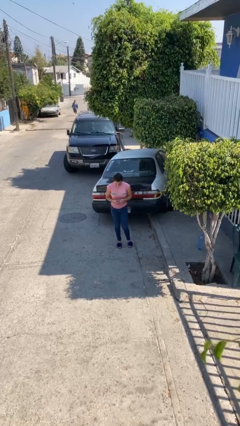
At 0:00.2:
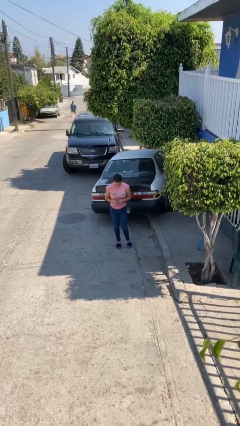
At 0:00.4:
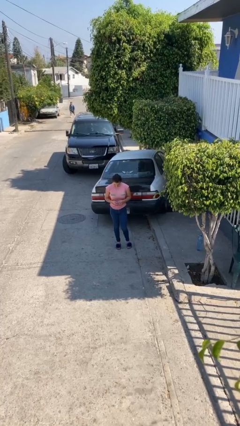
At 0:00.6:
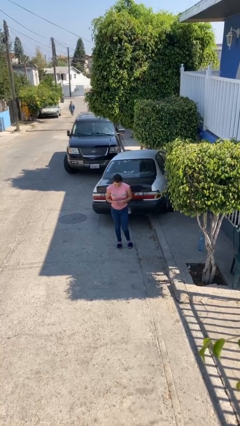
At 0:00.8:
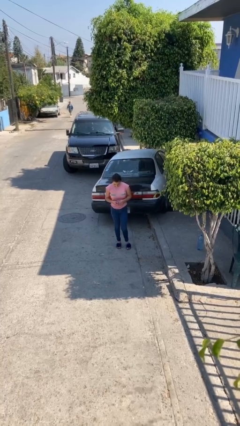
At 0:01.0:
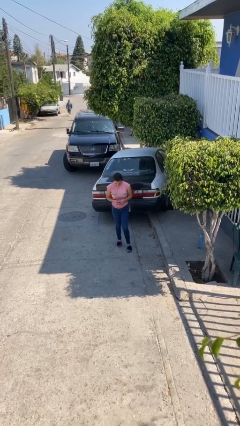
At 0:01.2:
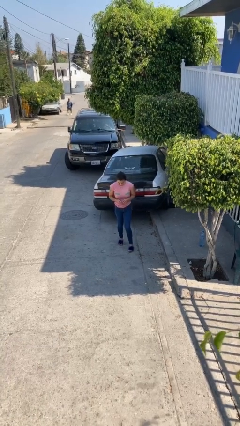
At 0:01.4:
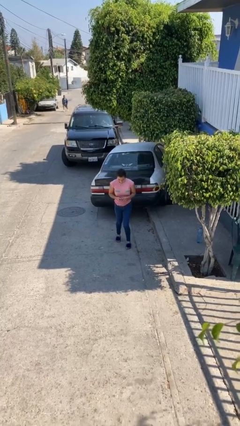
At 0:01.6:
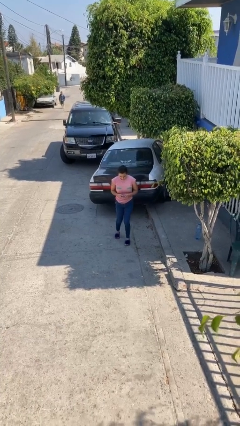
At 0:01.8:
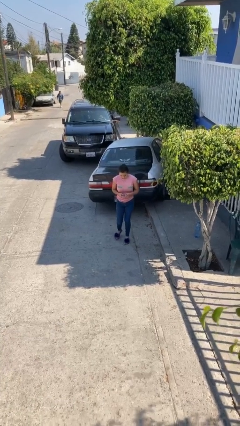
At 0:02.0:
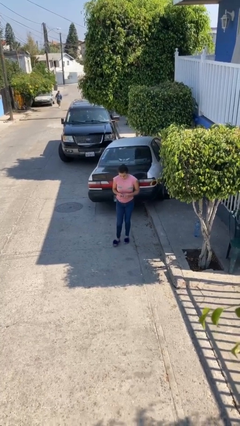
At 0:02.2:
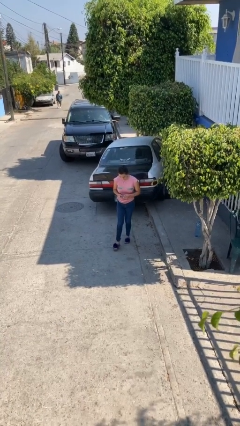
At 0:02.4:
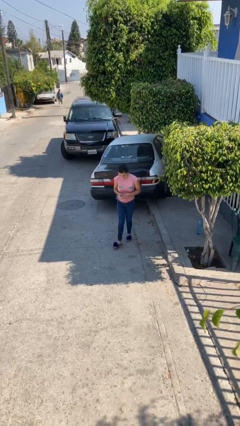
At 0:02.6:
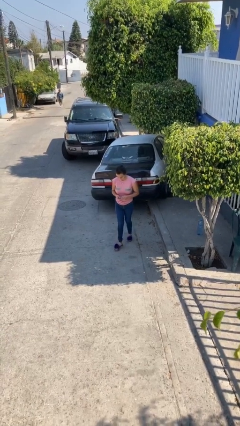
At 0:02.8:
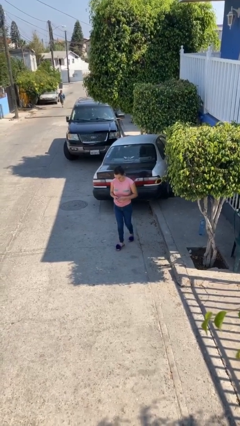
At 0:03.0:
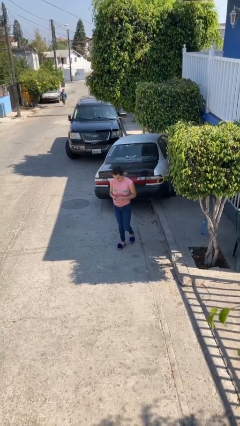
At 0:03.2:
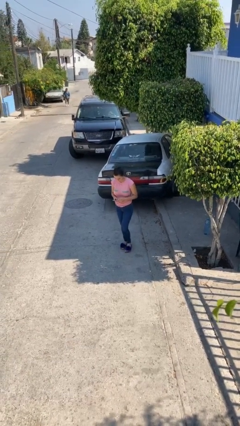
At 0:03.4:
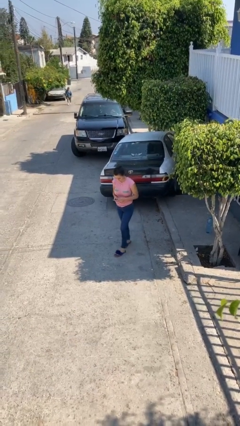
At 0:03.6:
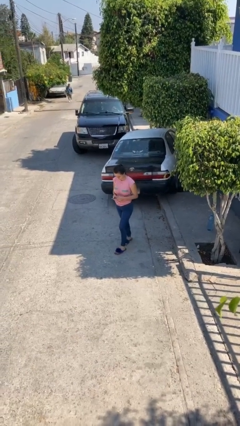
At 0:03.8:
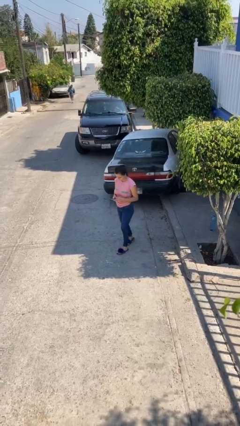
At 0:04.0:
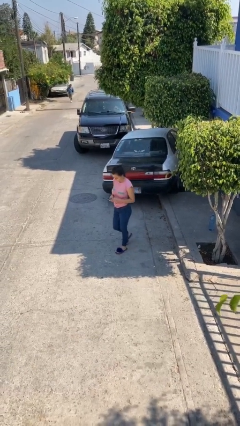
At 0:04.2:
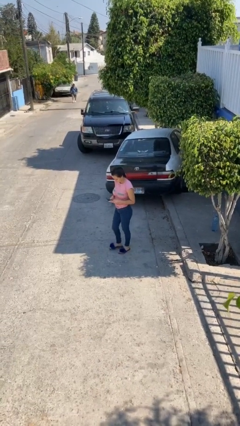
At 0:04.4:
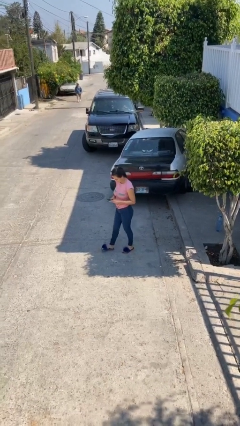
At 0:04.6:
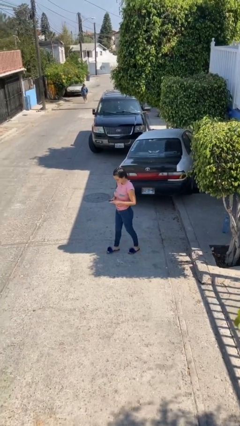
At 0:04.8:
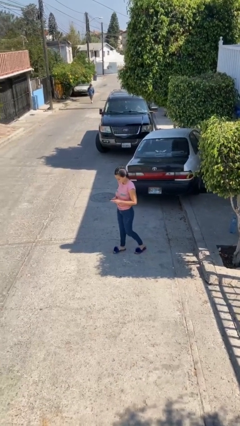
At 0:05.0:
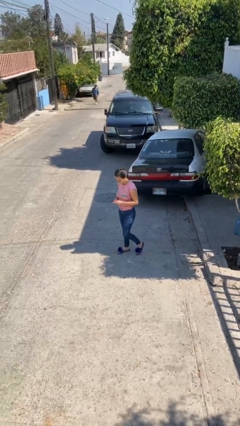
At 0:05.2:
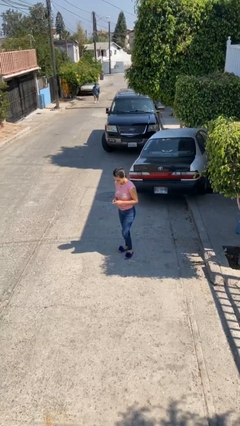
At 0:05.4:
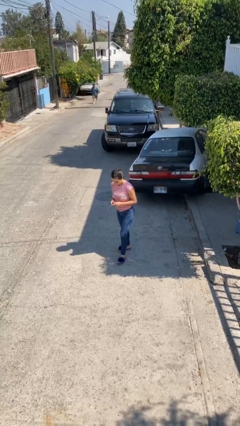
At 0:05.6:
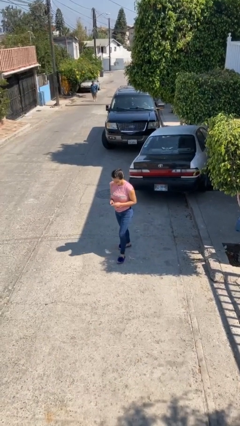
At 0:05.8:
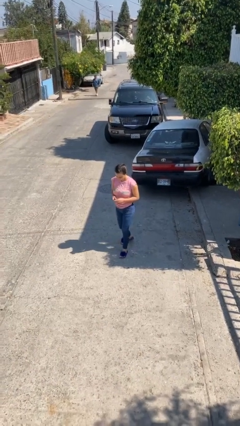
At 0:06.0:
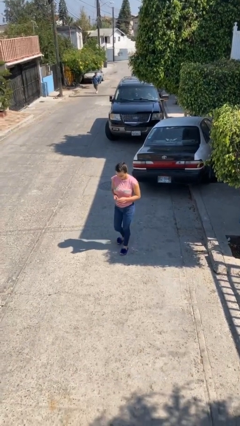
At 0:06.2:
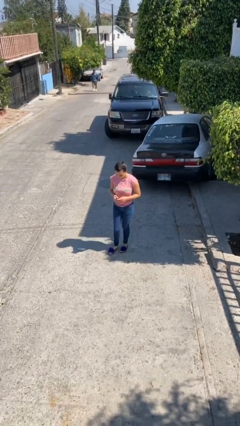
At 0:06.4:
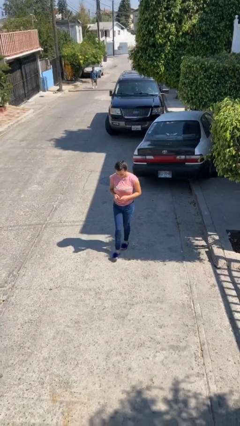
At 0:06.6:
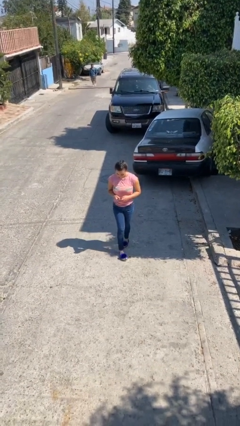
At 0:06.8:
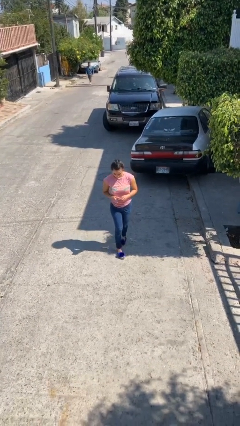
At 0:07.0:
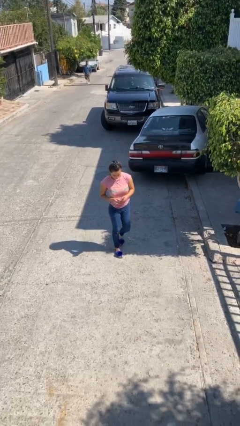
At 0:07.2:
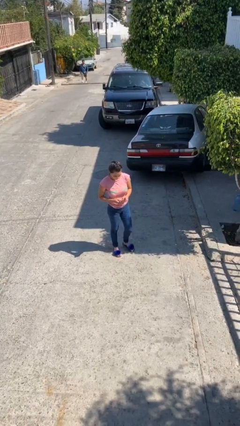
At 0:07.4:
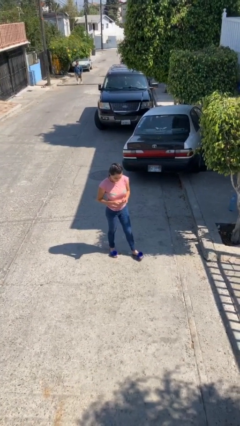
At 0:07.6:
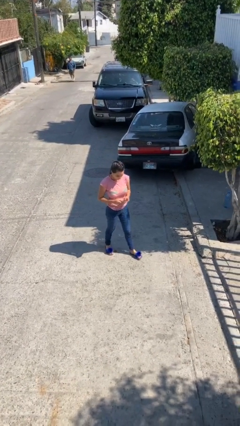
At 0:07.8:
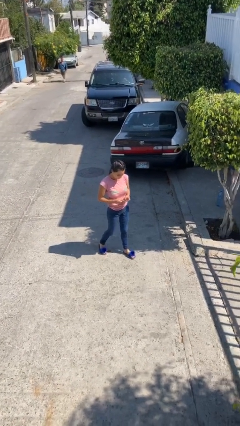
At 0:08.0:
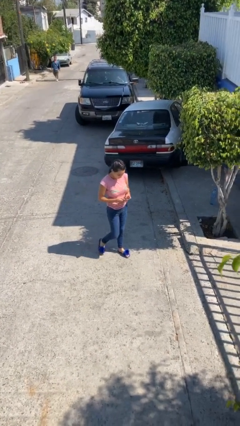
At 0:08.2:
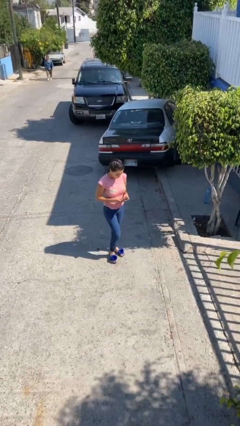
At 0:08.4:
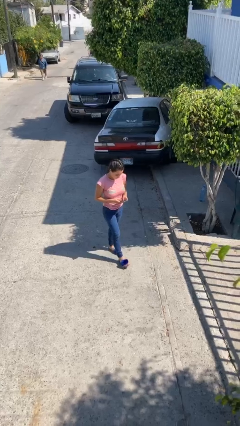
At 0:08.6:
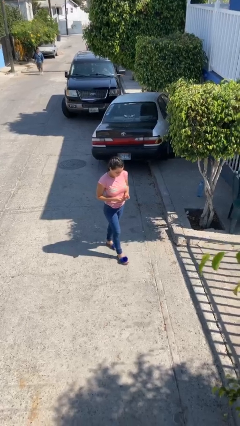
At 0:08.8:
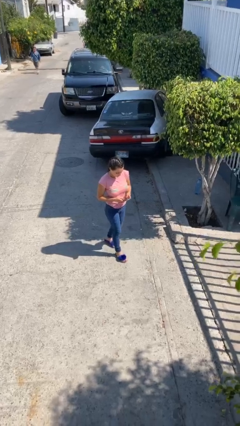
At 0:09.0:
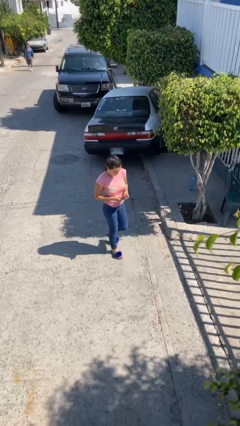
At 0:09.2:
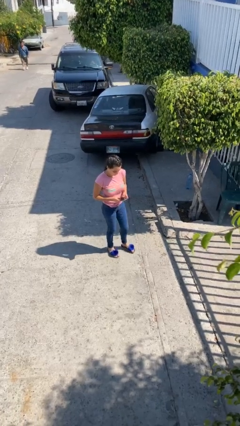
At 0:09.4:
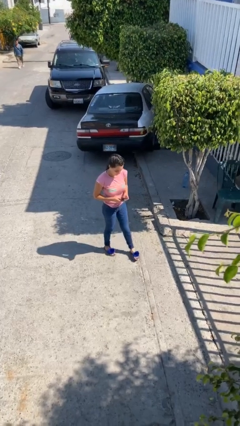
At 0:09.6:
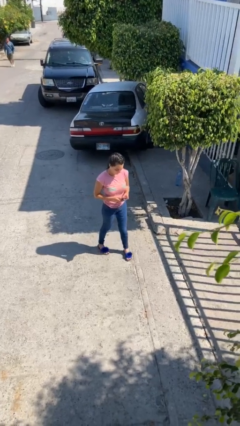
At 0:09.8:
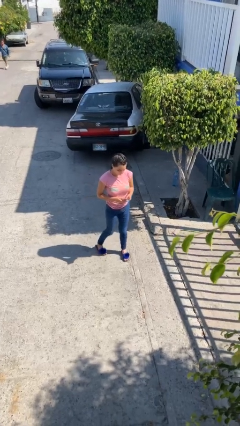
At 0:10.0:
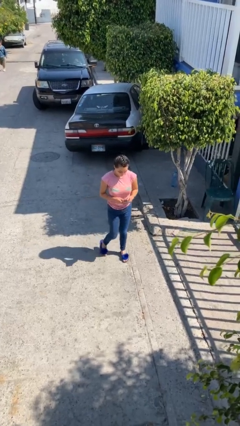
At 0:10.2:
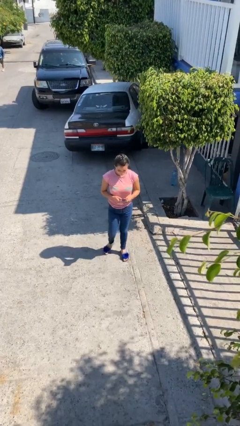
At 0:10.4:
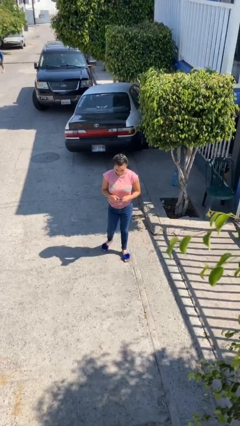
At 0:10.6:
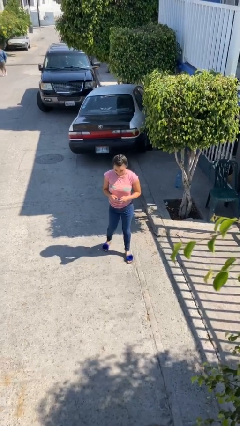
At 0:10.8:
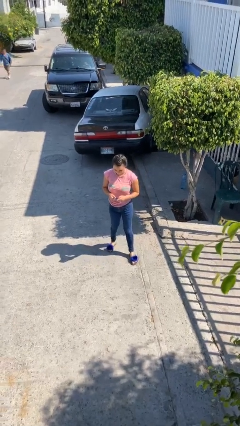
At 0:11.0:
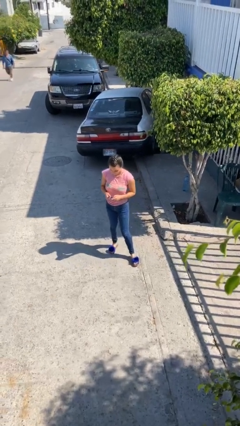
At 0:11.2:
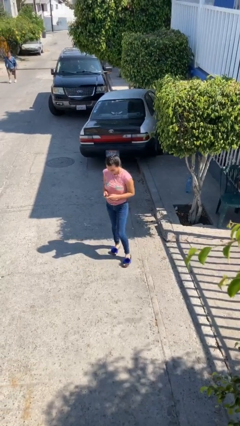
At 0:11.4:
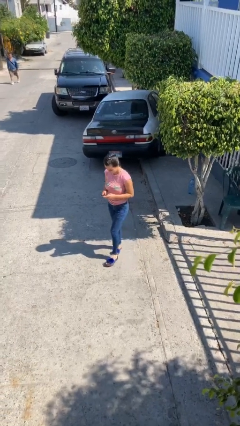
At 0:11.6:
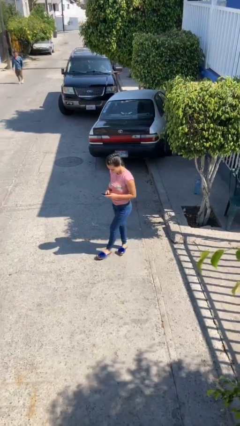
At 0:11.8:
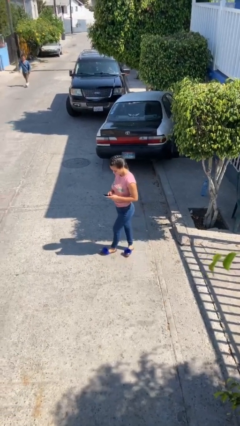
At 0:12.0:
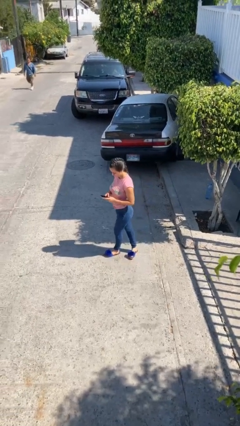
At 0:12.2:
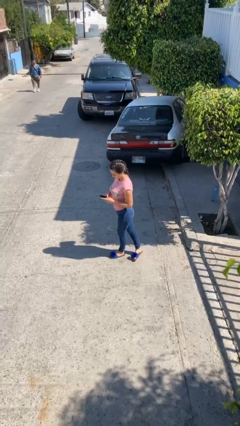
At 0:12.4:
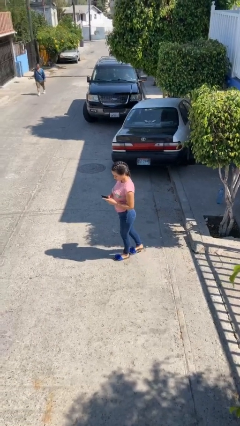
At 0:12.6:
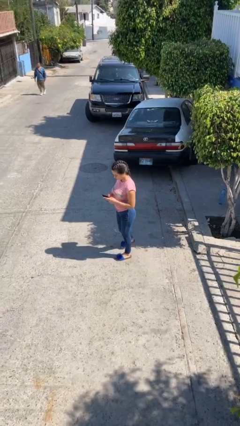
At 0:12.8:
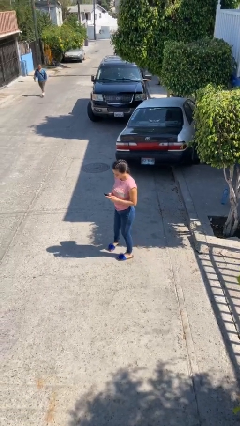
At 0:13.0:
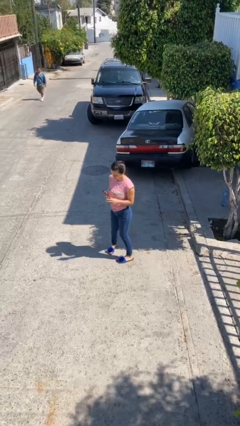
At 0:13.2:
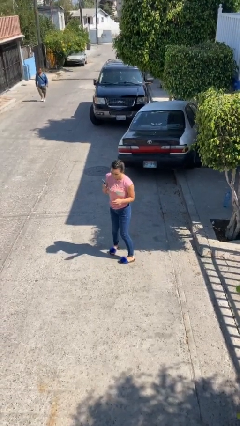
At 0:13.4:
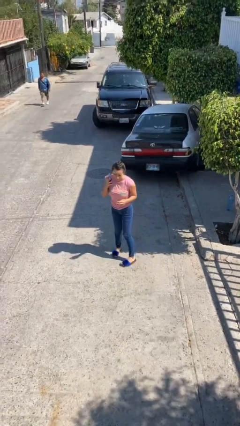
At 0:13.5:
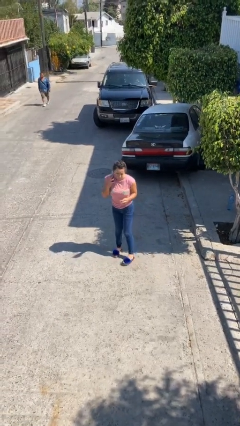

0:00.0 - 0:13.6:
person texts on phone

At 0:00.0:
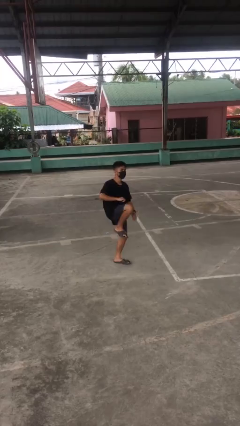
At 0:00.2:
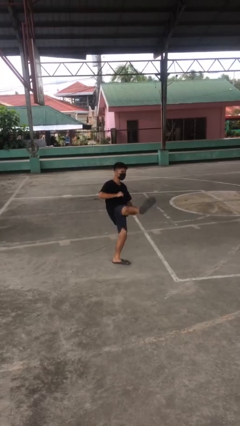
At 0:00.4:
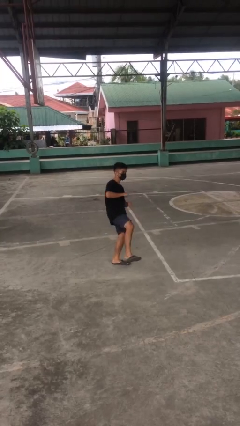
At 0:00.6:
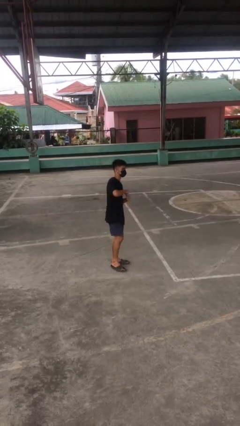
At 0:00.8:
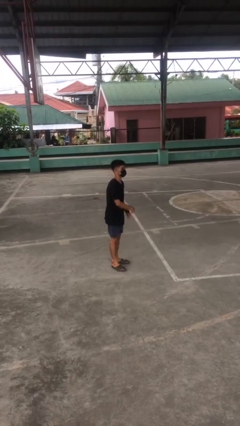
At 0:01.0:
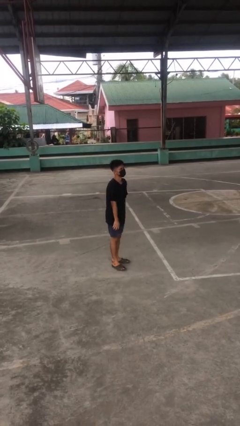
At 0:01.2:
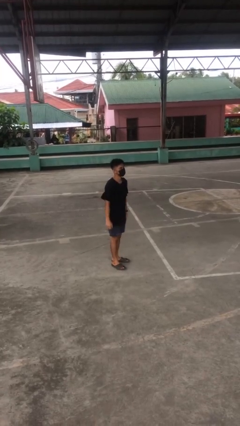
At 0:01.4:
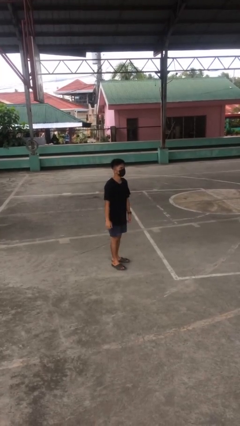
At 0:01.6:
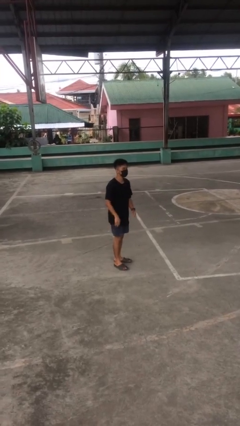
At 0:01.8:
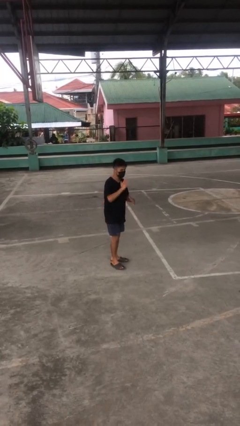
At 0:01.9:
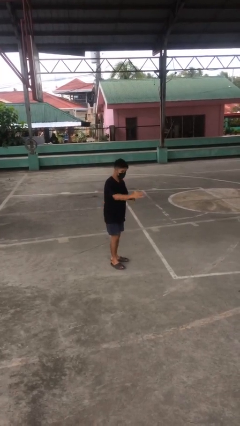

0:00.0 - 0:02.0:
person karate kicks

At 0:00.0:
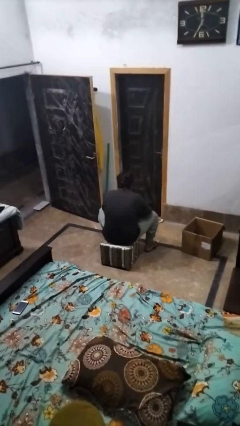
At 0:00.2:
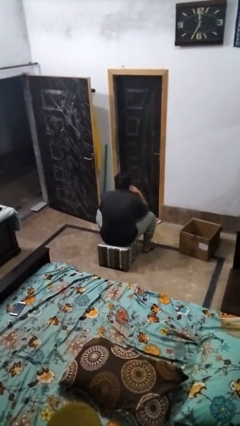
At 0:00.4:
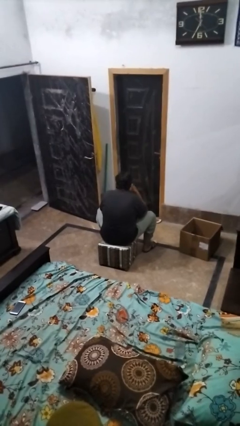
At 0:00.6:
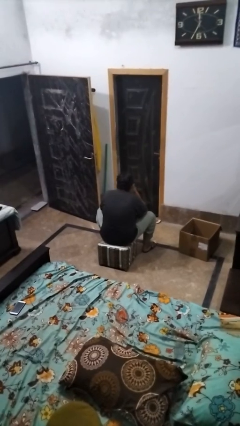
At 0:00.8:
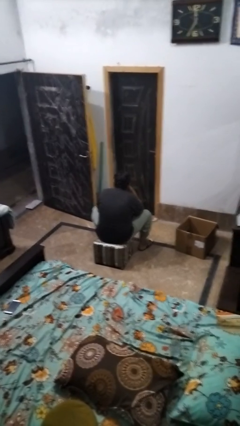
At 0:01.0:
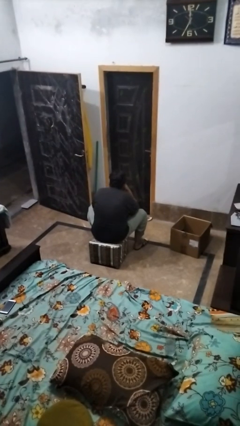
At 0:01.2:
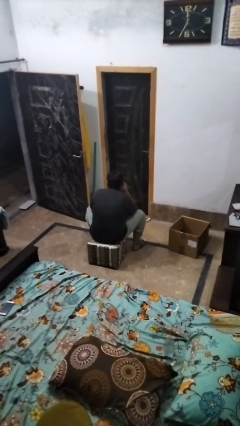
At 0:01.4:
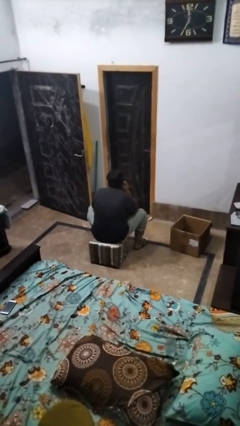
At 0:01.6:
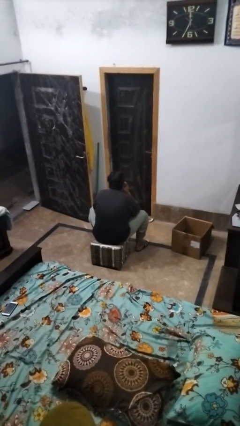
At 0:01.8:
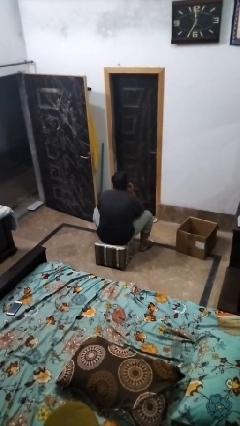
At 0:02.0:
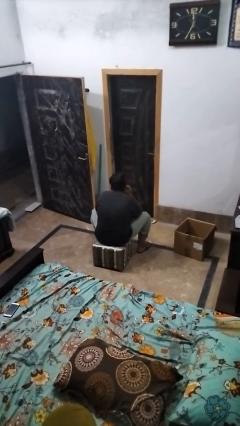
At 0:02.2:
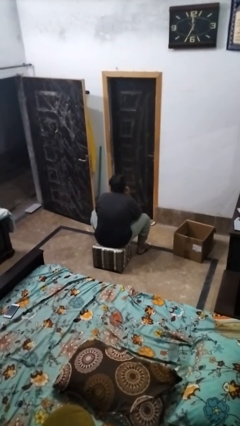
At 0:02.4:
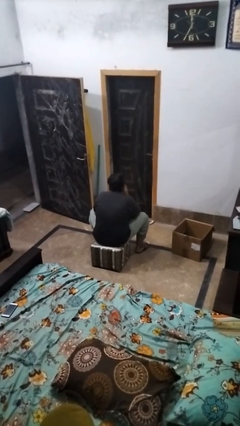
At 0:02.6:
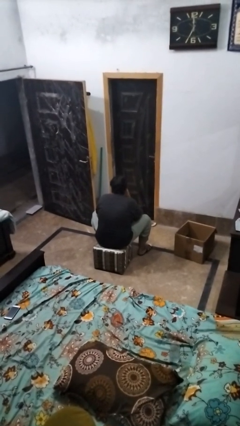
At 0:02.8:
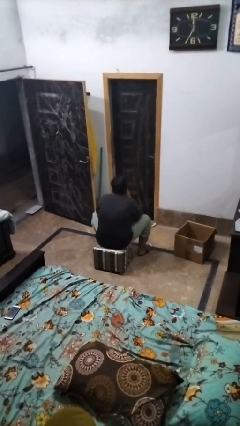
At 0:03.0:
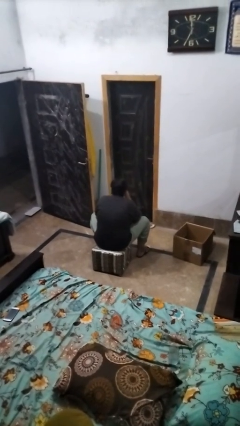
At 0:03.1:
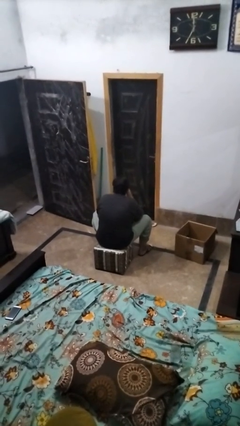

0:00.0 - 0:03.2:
person strokes chin
